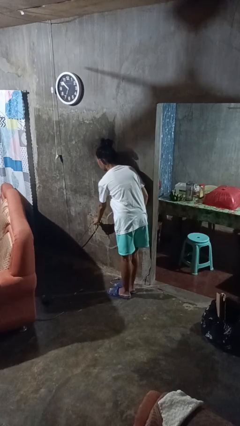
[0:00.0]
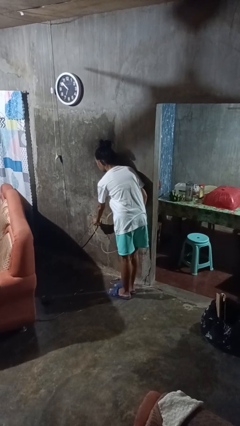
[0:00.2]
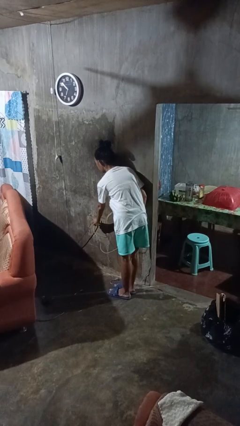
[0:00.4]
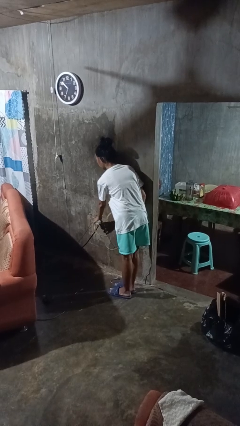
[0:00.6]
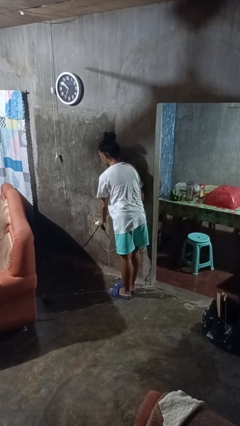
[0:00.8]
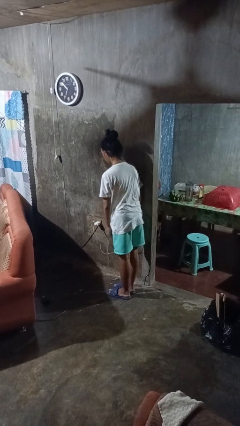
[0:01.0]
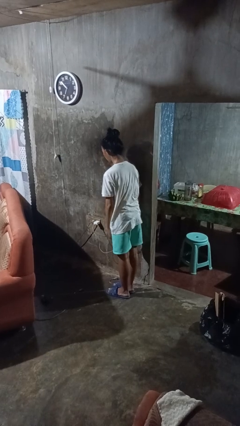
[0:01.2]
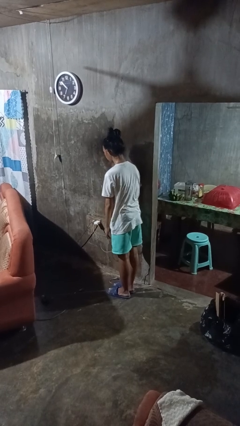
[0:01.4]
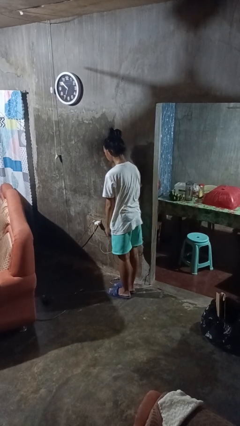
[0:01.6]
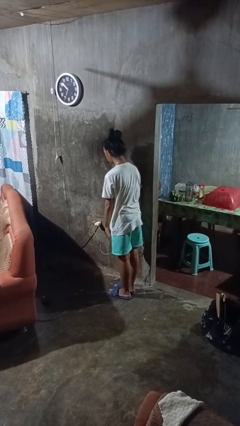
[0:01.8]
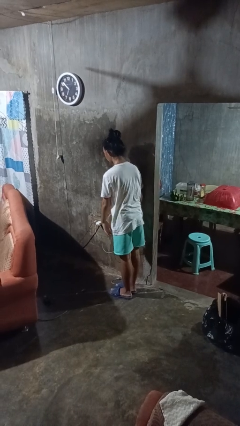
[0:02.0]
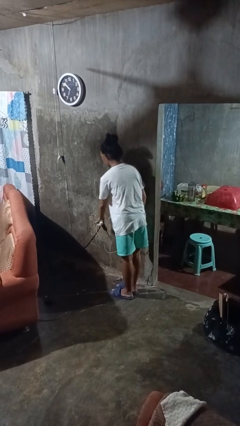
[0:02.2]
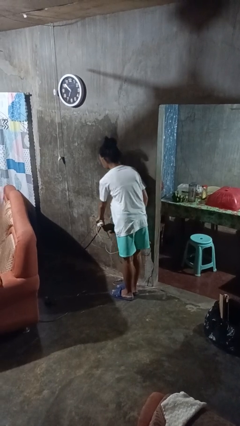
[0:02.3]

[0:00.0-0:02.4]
person plugs into electrical socket

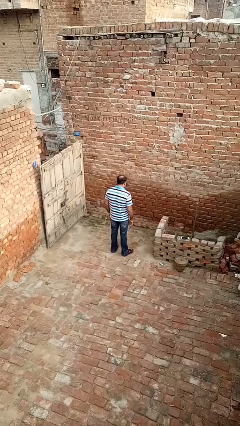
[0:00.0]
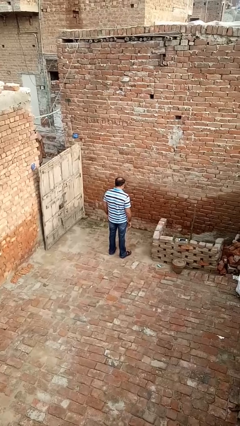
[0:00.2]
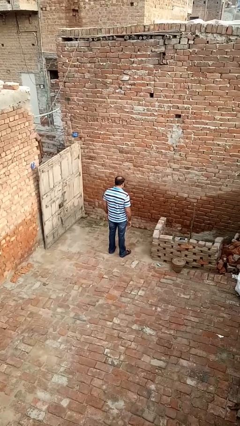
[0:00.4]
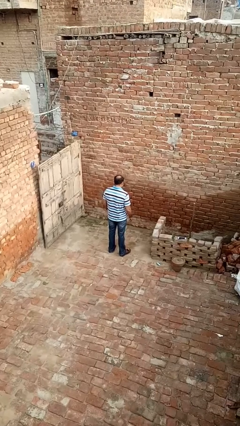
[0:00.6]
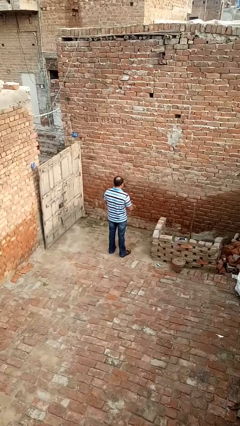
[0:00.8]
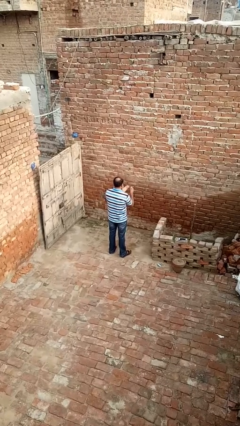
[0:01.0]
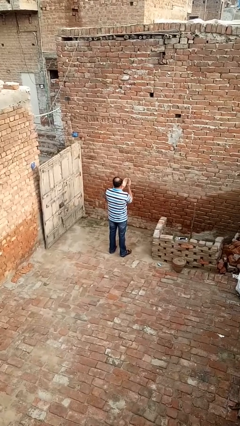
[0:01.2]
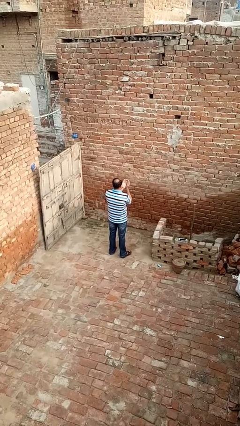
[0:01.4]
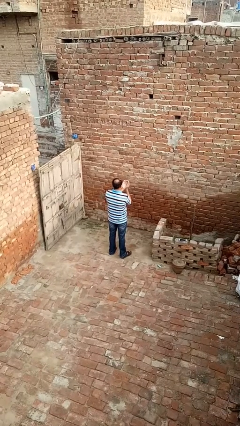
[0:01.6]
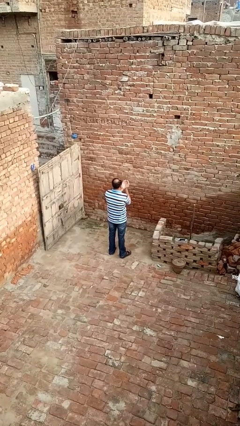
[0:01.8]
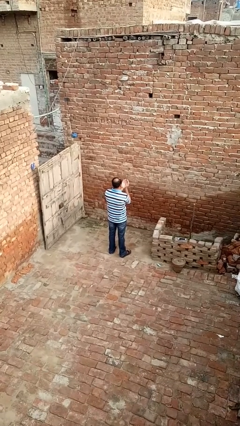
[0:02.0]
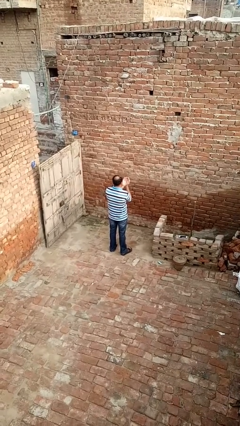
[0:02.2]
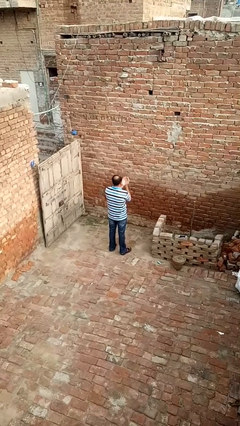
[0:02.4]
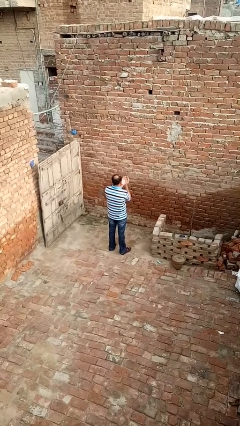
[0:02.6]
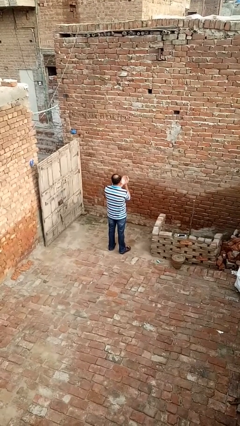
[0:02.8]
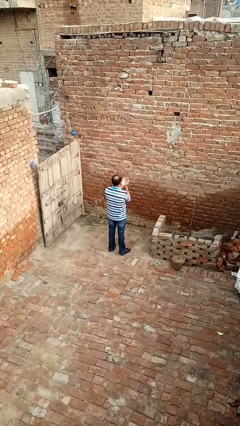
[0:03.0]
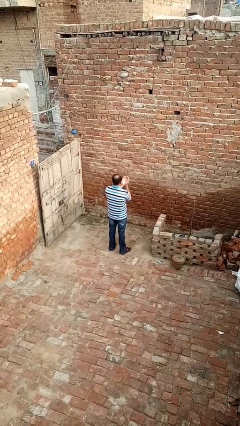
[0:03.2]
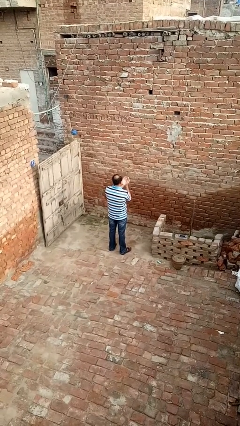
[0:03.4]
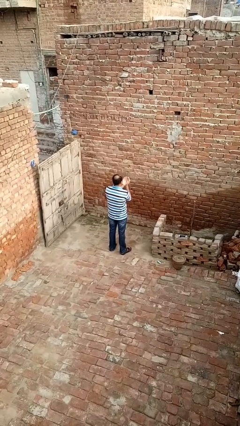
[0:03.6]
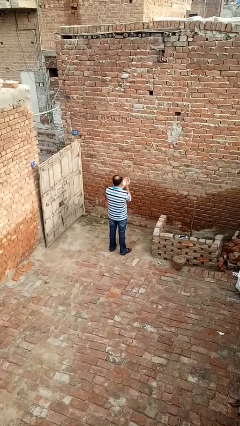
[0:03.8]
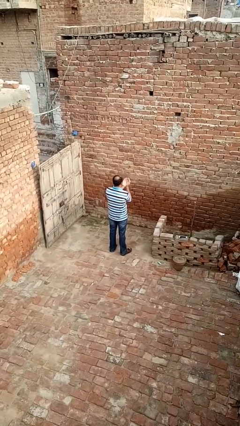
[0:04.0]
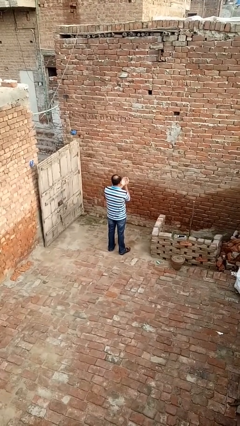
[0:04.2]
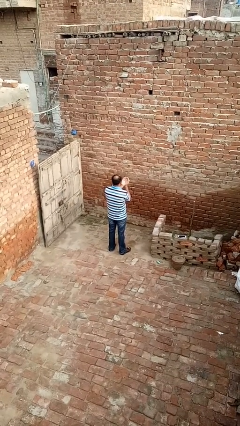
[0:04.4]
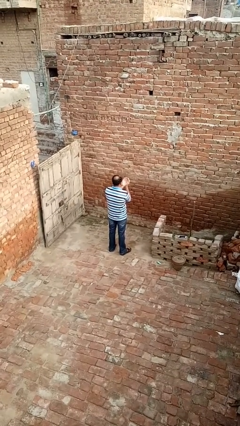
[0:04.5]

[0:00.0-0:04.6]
person prays

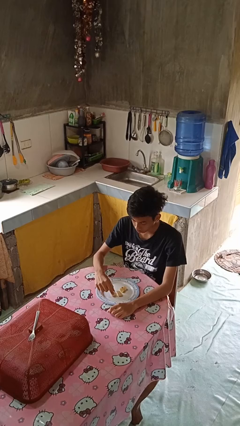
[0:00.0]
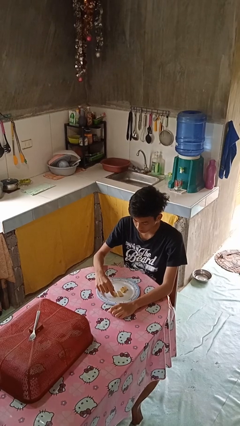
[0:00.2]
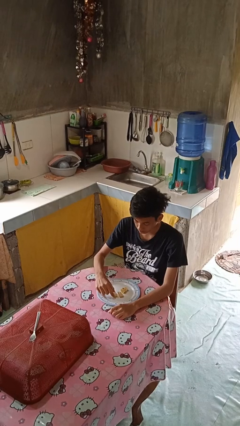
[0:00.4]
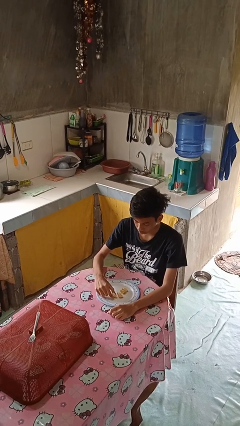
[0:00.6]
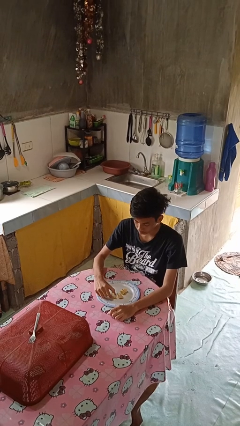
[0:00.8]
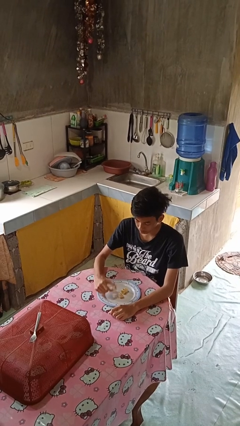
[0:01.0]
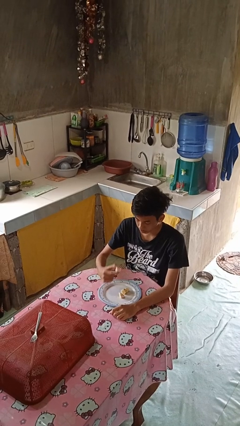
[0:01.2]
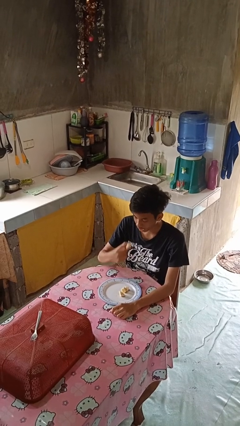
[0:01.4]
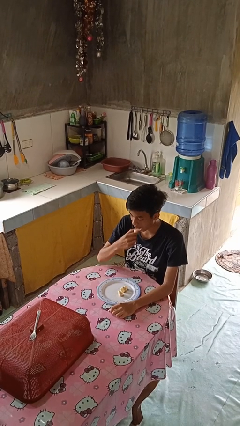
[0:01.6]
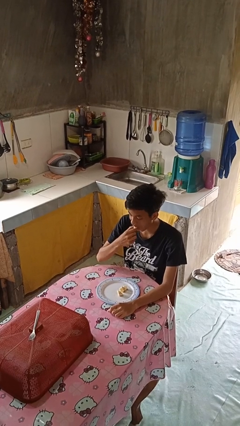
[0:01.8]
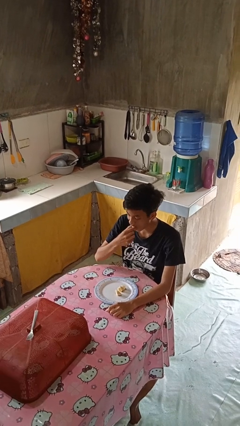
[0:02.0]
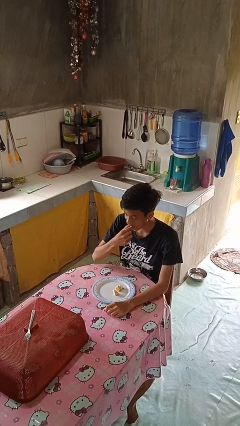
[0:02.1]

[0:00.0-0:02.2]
person eats with hands

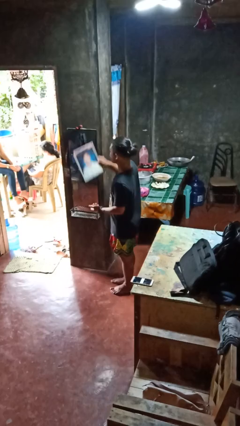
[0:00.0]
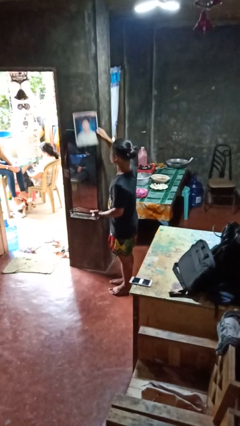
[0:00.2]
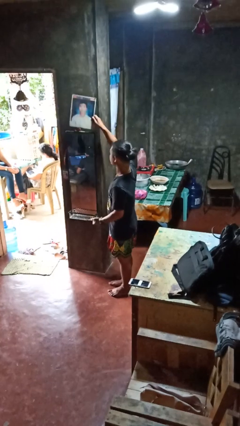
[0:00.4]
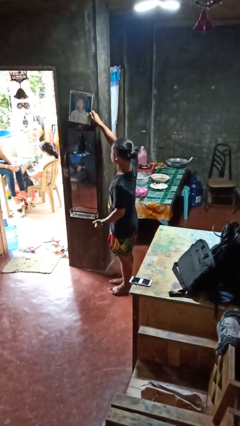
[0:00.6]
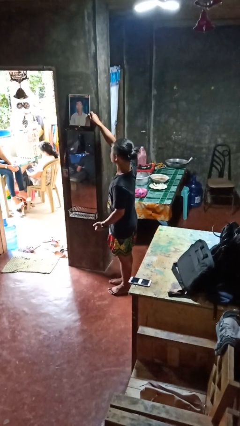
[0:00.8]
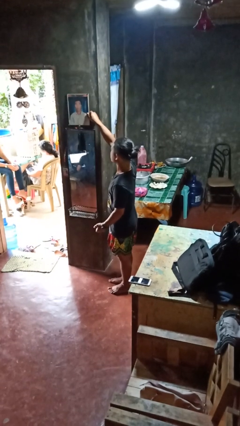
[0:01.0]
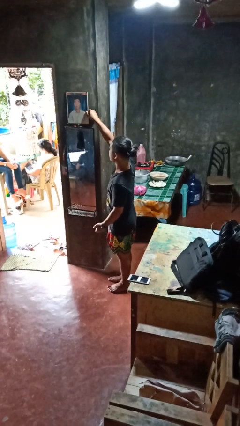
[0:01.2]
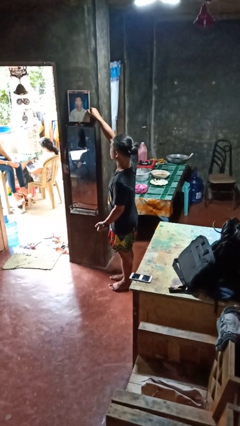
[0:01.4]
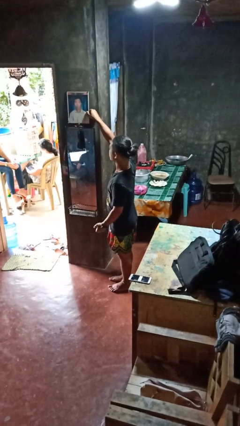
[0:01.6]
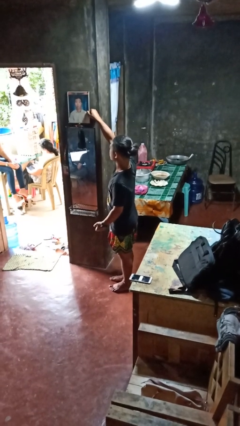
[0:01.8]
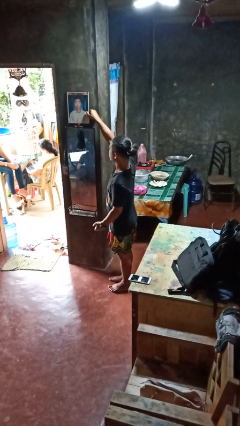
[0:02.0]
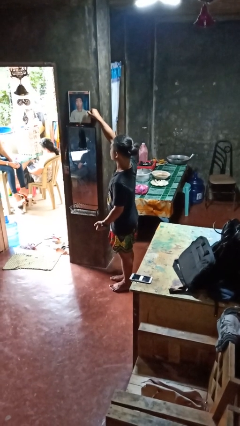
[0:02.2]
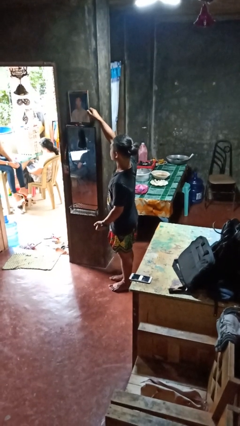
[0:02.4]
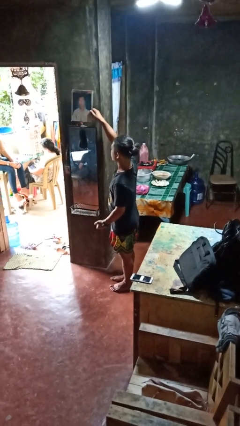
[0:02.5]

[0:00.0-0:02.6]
person puts up picture frame

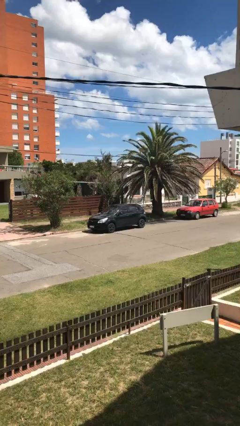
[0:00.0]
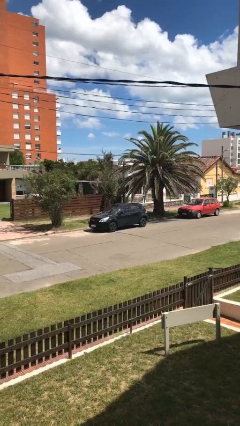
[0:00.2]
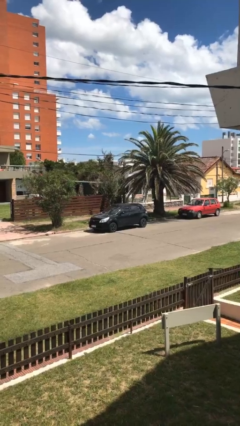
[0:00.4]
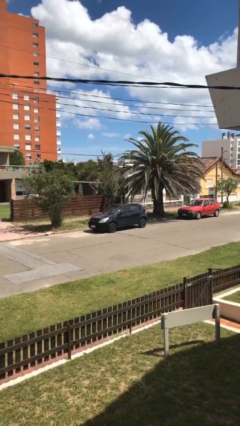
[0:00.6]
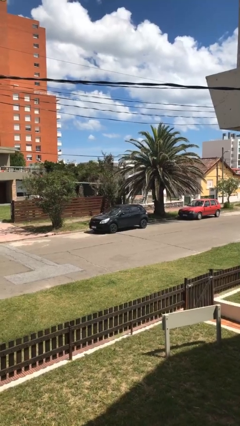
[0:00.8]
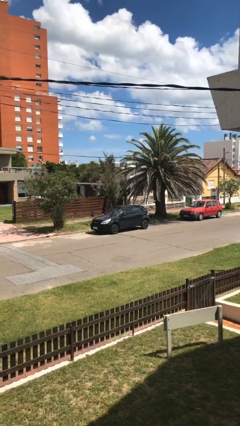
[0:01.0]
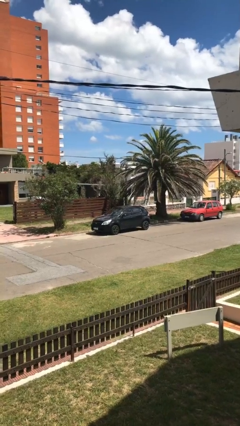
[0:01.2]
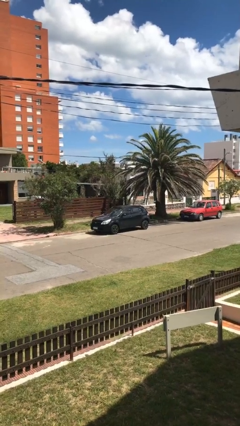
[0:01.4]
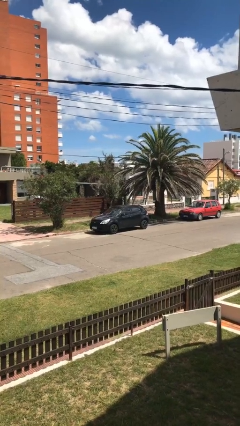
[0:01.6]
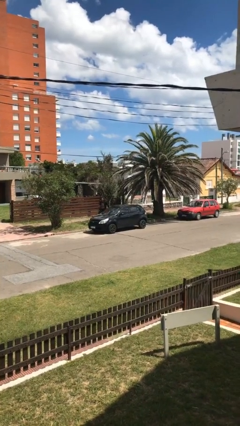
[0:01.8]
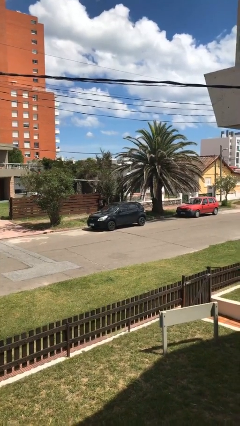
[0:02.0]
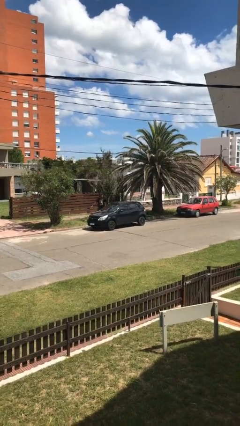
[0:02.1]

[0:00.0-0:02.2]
car drops off person

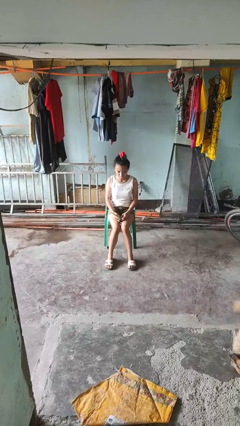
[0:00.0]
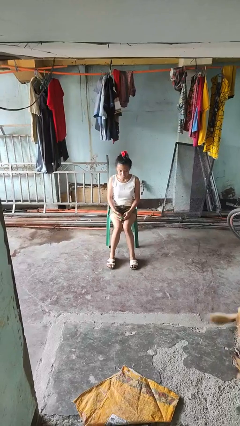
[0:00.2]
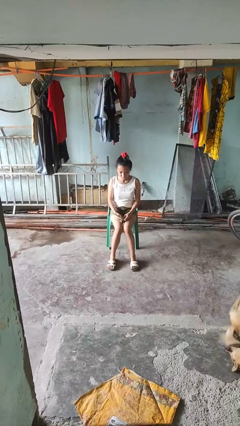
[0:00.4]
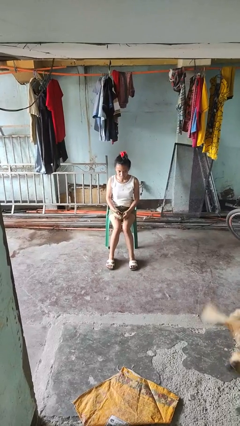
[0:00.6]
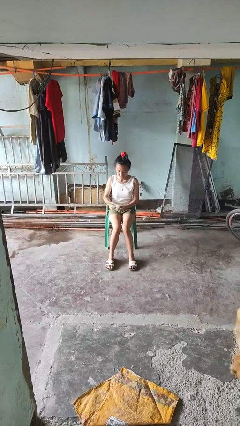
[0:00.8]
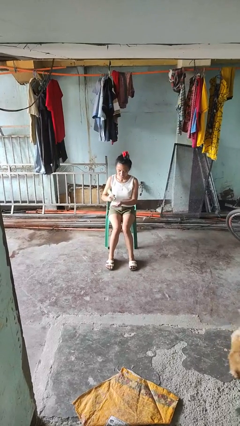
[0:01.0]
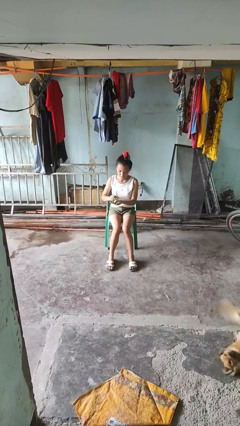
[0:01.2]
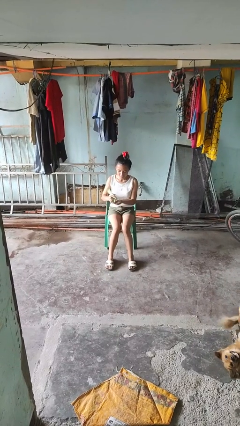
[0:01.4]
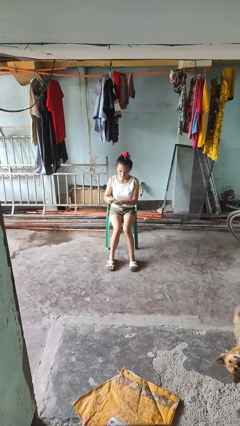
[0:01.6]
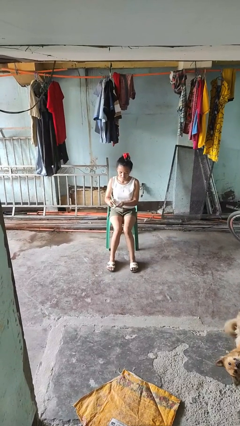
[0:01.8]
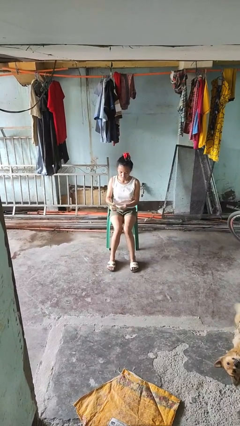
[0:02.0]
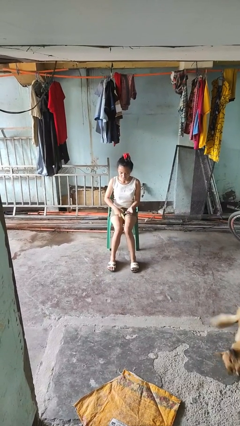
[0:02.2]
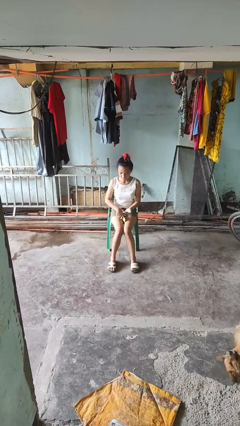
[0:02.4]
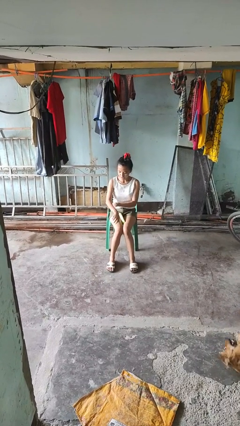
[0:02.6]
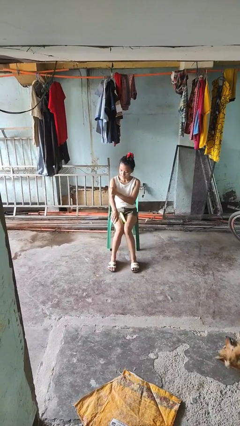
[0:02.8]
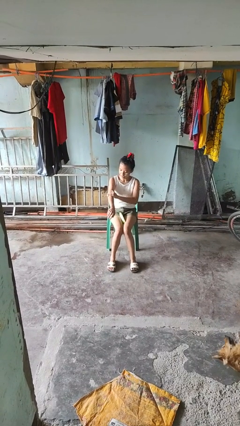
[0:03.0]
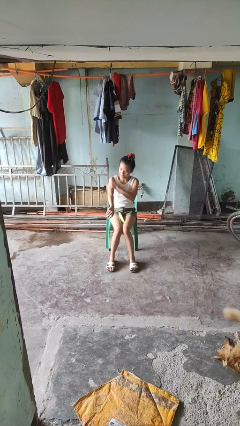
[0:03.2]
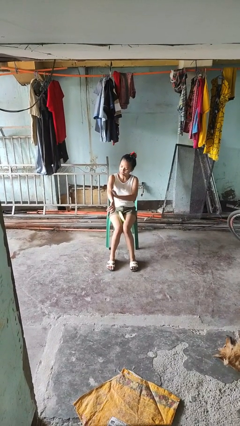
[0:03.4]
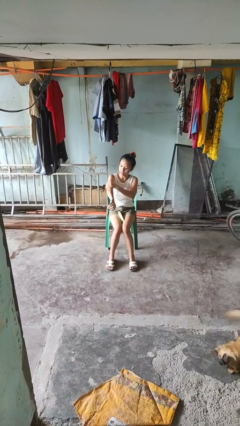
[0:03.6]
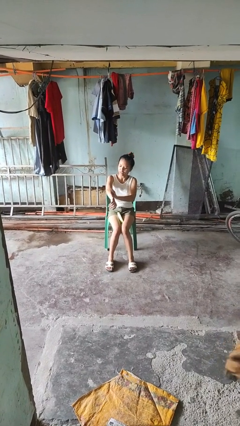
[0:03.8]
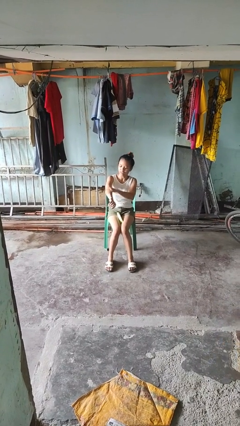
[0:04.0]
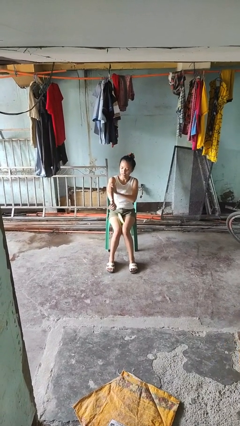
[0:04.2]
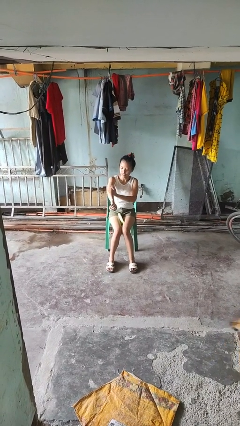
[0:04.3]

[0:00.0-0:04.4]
person applies sunscreen
